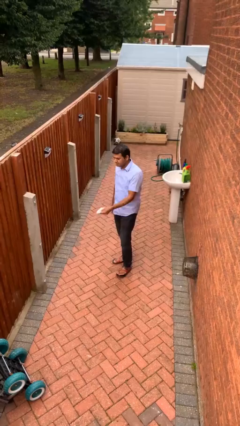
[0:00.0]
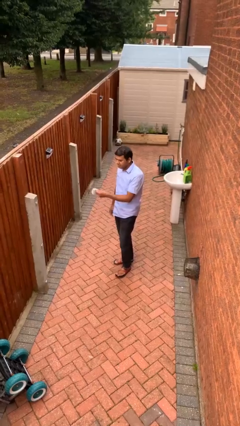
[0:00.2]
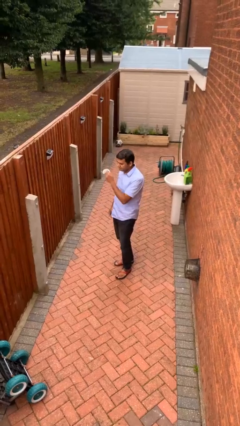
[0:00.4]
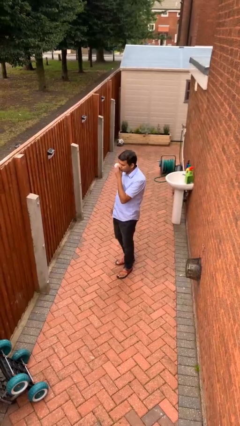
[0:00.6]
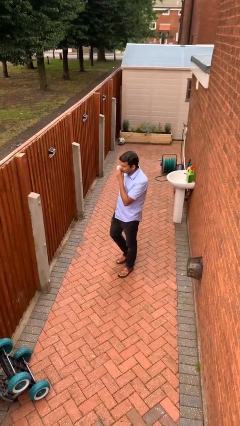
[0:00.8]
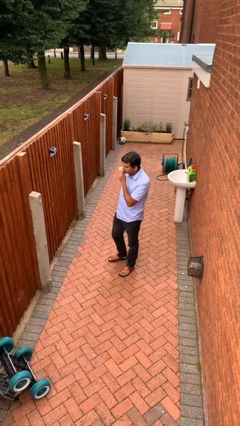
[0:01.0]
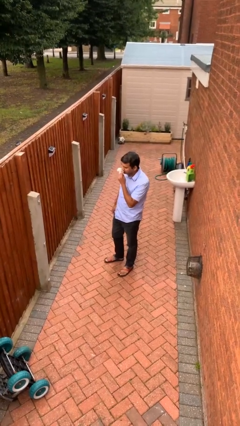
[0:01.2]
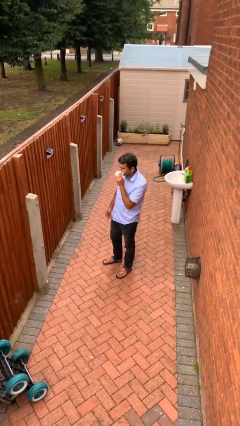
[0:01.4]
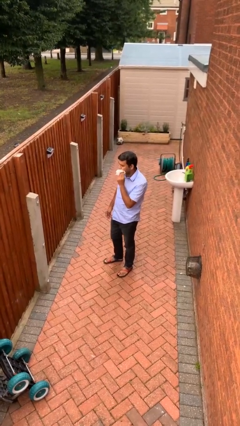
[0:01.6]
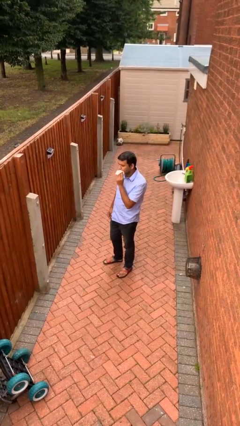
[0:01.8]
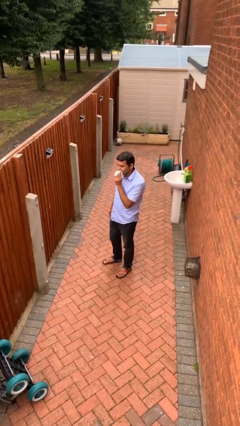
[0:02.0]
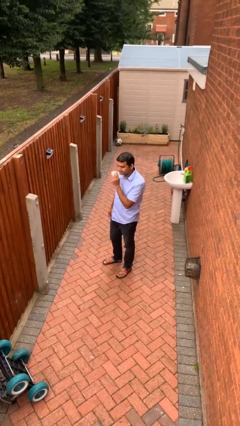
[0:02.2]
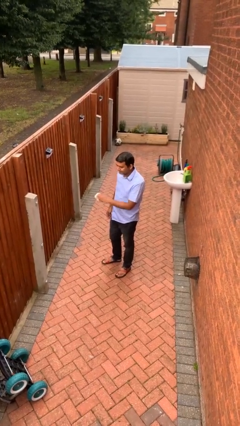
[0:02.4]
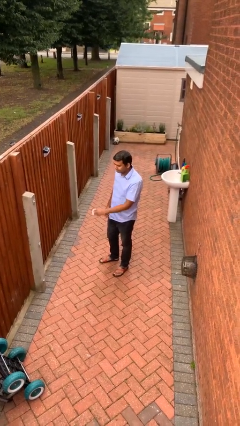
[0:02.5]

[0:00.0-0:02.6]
person wipes mouth with napkin

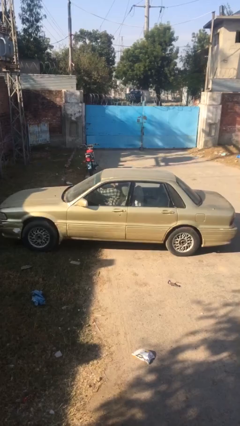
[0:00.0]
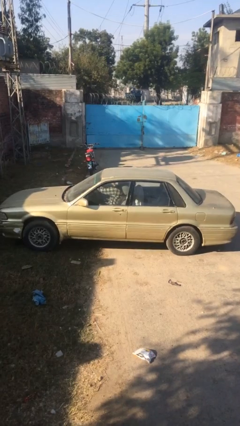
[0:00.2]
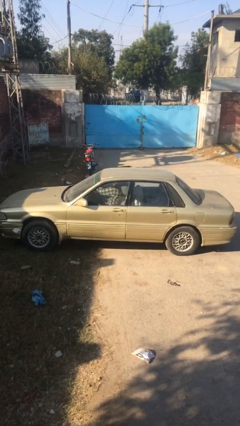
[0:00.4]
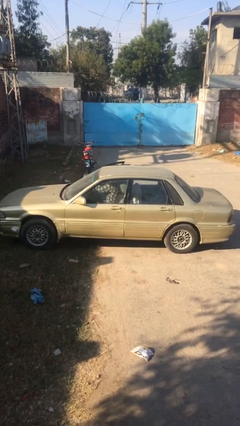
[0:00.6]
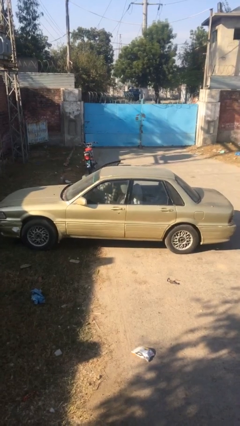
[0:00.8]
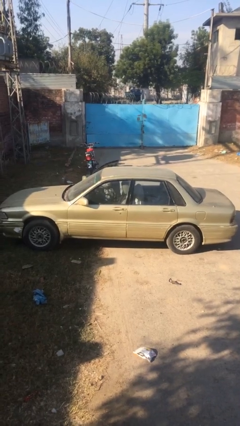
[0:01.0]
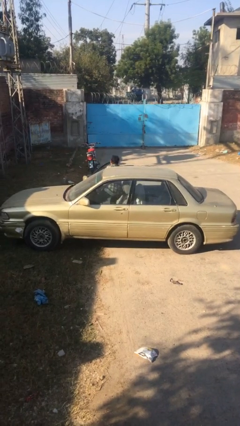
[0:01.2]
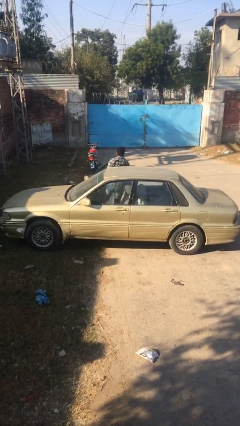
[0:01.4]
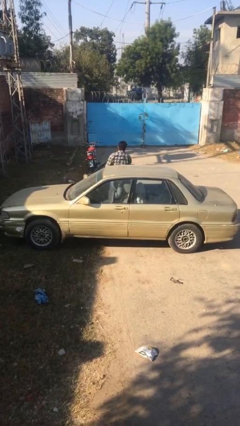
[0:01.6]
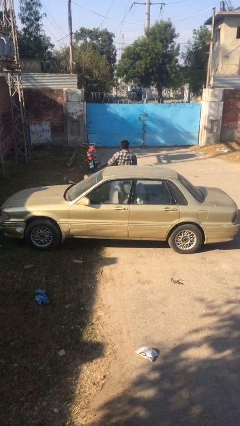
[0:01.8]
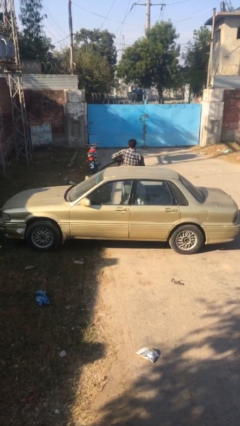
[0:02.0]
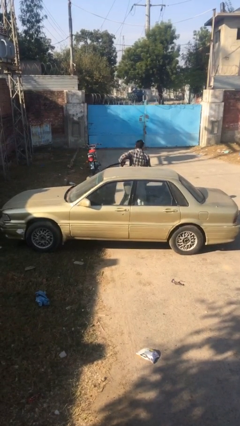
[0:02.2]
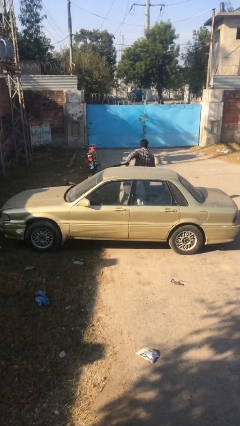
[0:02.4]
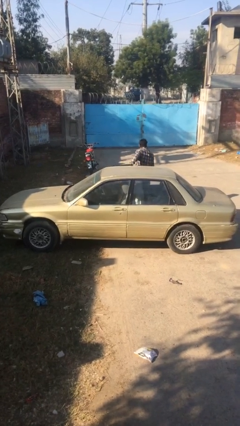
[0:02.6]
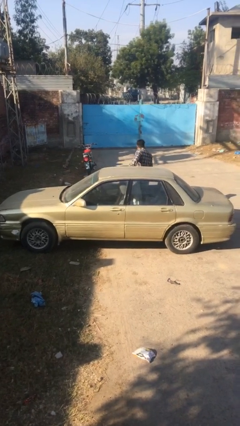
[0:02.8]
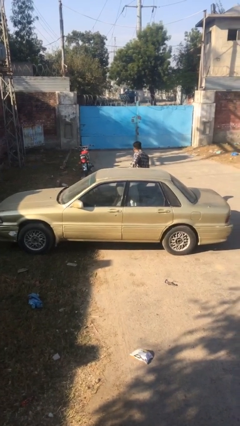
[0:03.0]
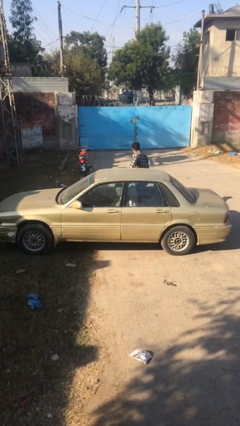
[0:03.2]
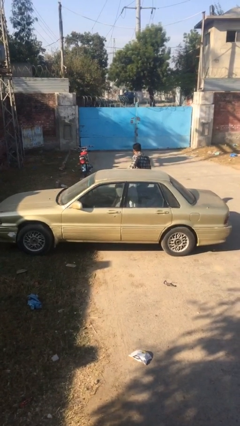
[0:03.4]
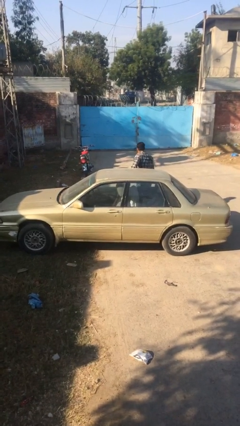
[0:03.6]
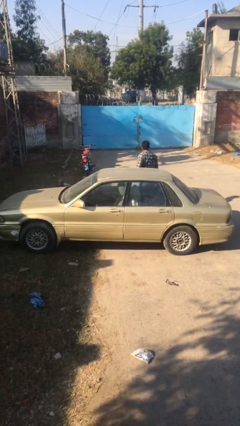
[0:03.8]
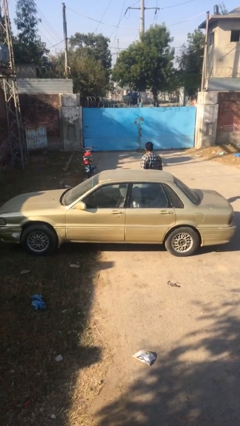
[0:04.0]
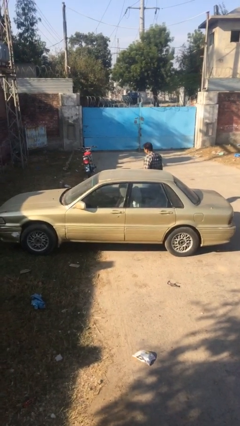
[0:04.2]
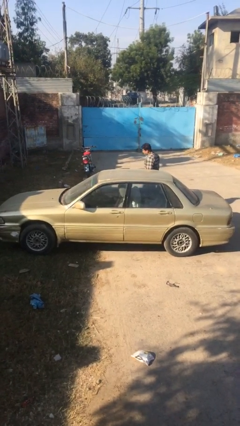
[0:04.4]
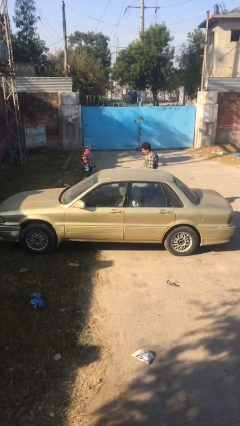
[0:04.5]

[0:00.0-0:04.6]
car drops off person

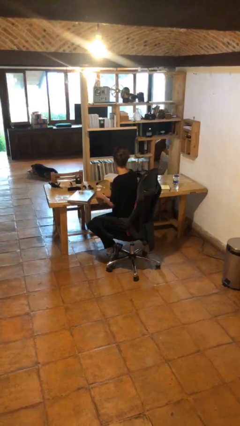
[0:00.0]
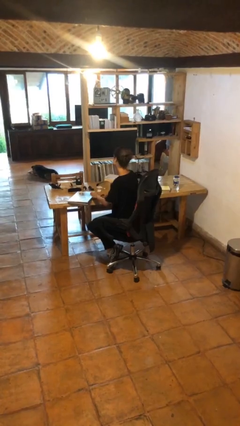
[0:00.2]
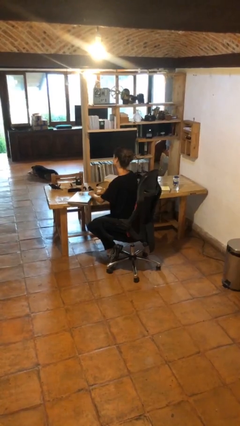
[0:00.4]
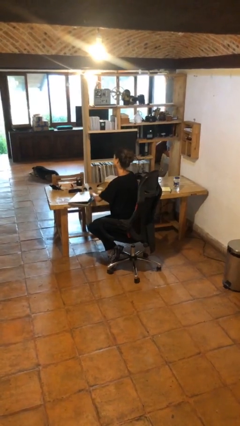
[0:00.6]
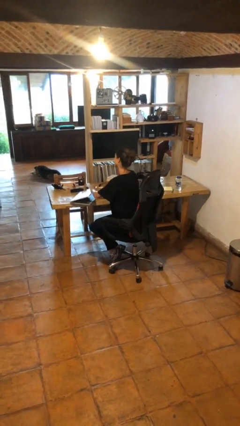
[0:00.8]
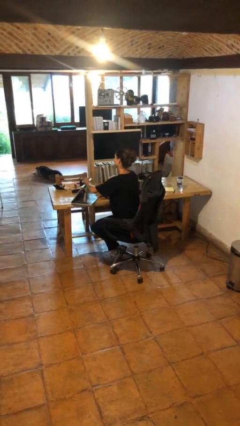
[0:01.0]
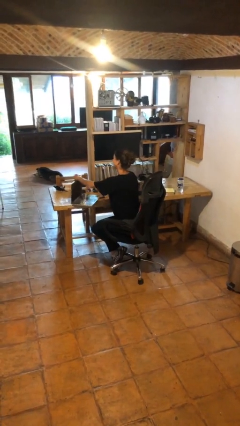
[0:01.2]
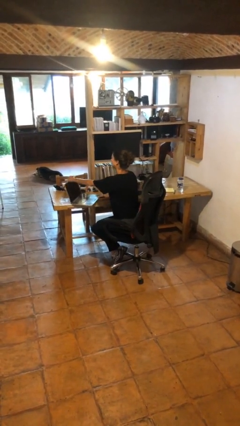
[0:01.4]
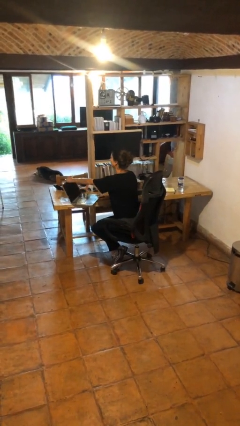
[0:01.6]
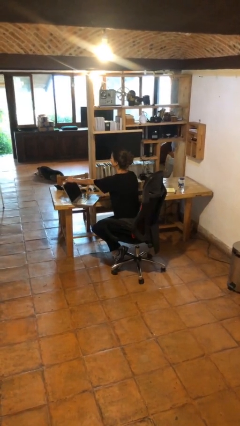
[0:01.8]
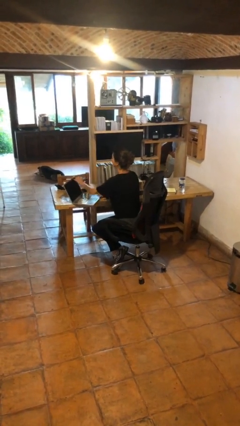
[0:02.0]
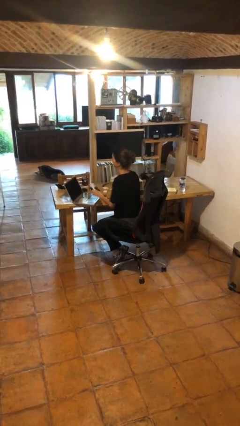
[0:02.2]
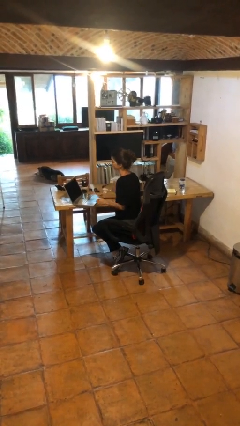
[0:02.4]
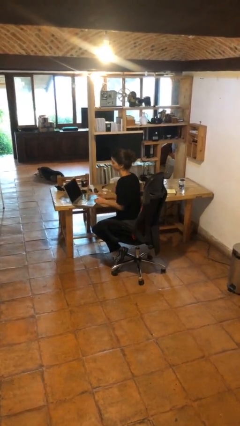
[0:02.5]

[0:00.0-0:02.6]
person opens laptop

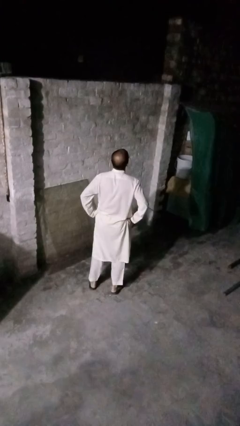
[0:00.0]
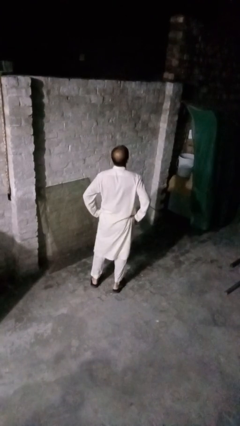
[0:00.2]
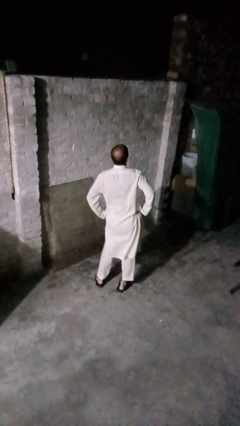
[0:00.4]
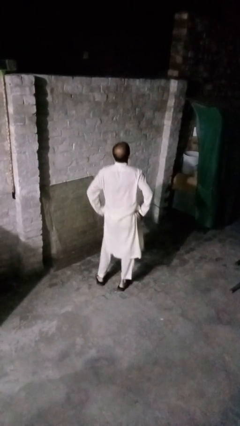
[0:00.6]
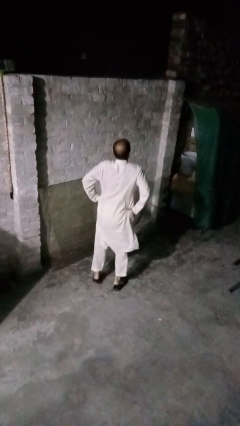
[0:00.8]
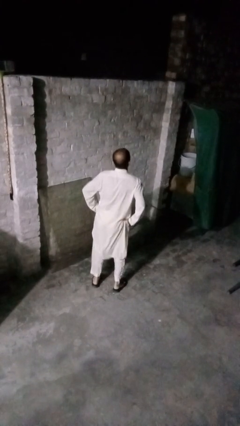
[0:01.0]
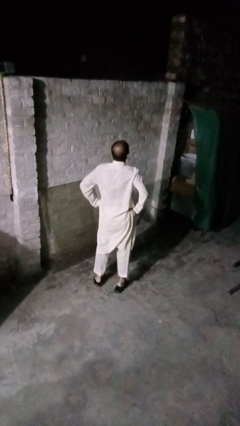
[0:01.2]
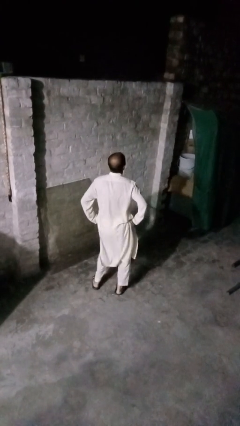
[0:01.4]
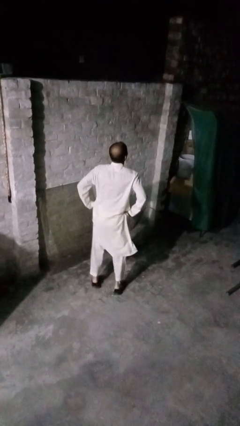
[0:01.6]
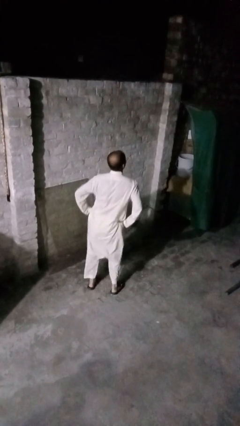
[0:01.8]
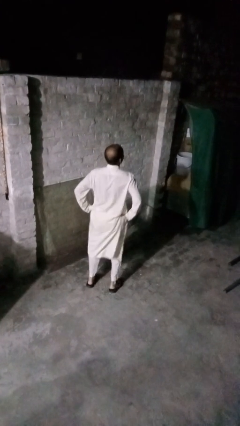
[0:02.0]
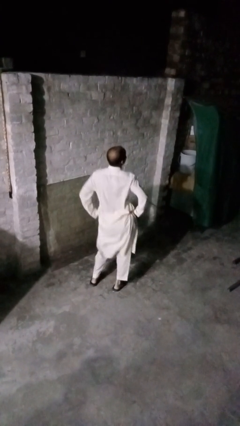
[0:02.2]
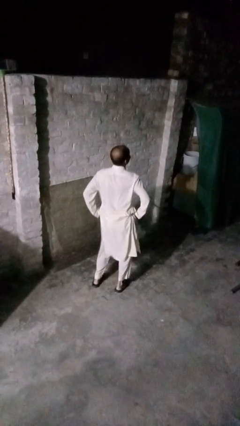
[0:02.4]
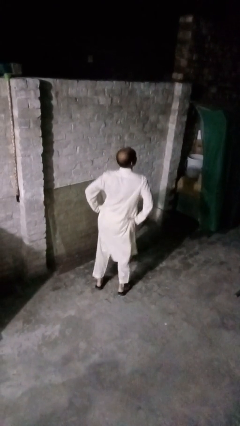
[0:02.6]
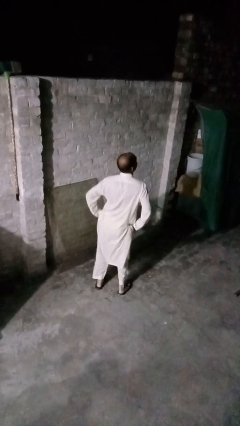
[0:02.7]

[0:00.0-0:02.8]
person wiggles hips

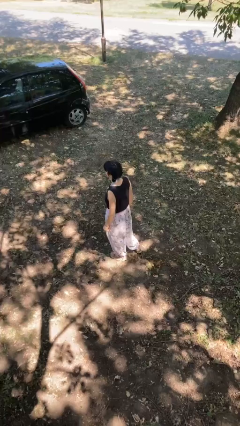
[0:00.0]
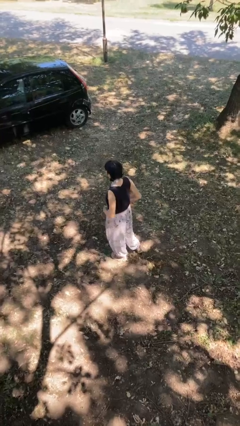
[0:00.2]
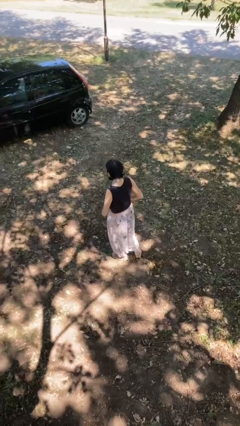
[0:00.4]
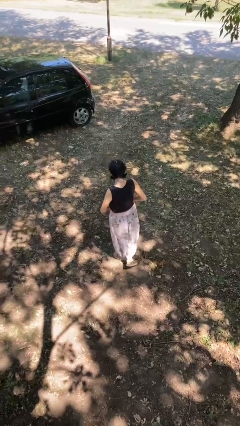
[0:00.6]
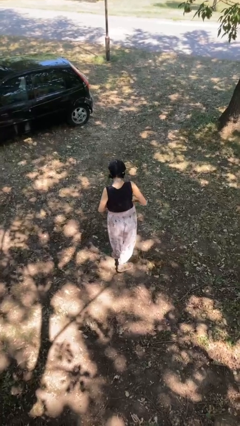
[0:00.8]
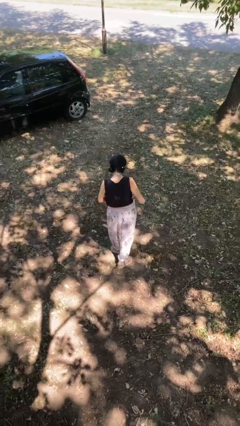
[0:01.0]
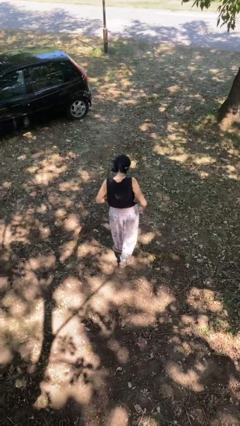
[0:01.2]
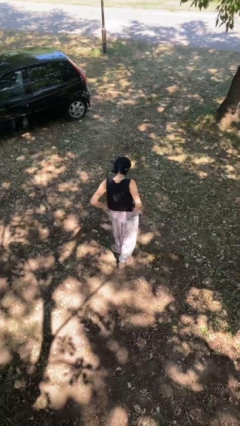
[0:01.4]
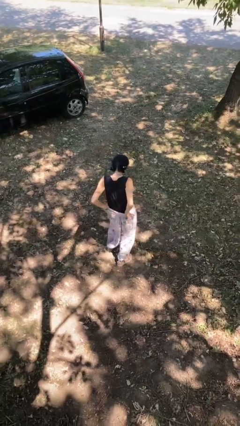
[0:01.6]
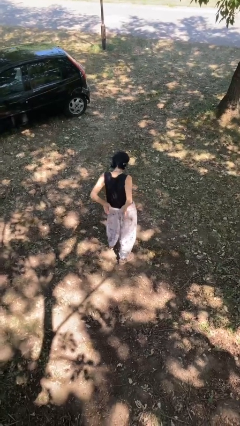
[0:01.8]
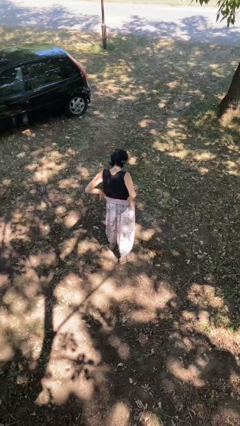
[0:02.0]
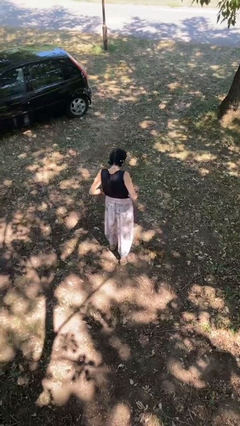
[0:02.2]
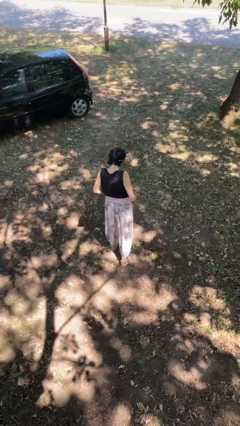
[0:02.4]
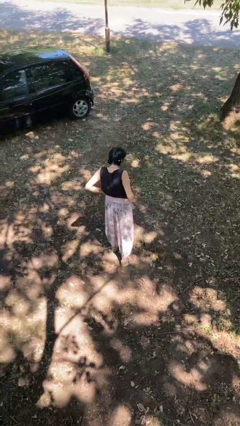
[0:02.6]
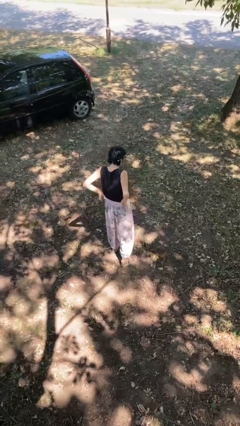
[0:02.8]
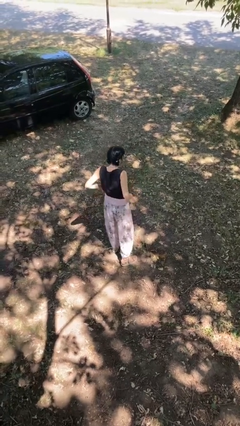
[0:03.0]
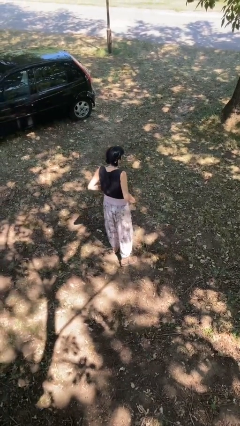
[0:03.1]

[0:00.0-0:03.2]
person hikes up pants

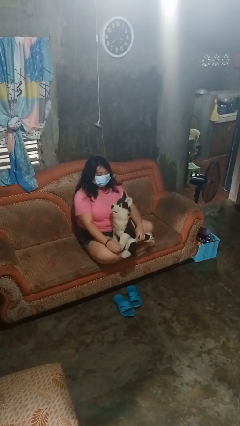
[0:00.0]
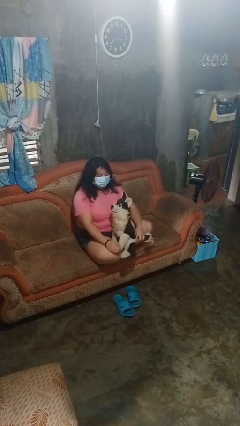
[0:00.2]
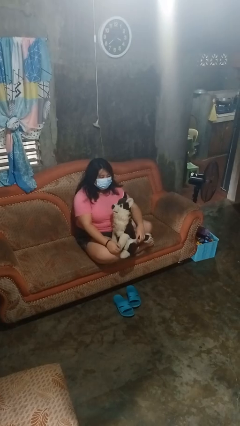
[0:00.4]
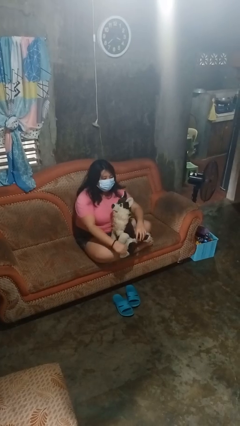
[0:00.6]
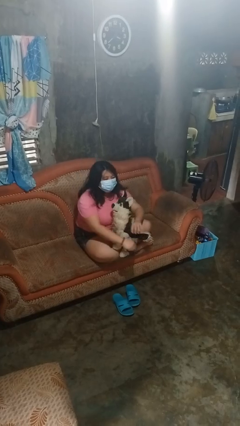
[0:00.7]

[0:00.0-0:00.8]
person hugs stuffed animal

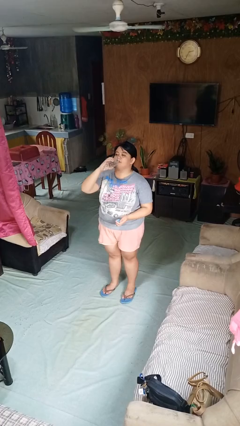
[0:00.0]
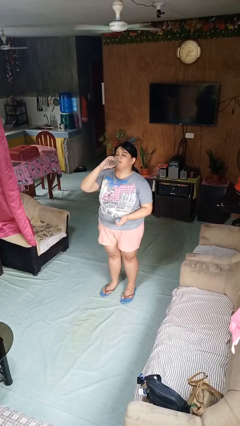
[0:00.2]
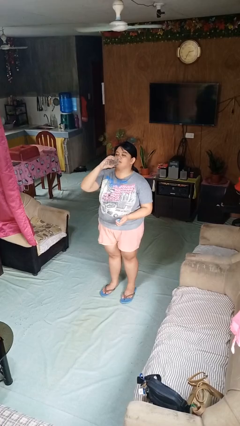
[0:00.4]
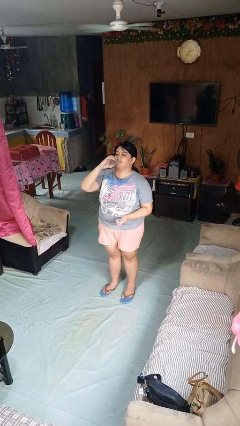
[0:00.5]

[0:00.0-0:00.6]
person drinks from bottle
